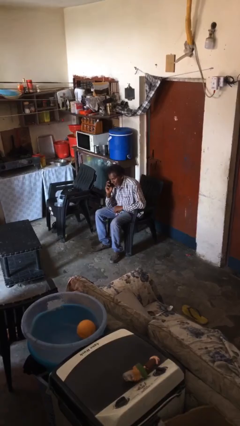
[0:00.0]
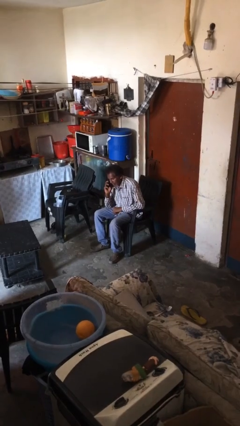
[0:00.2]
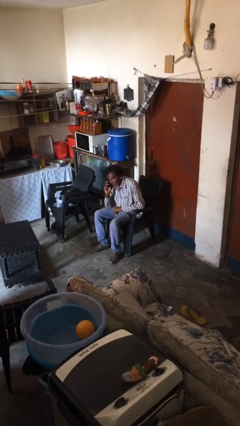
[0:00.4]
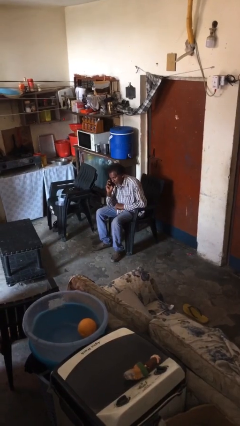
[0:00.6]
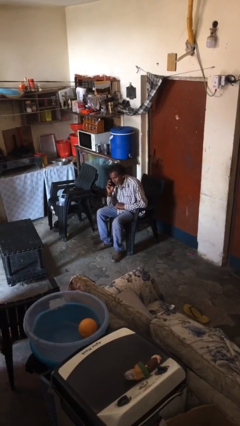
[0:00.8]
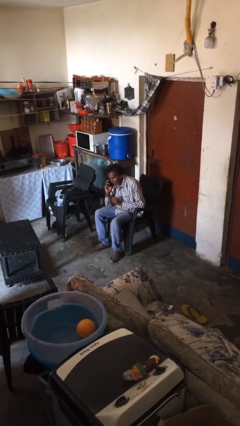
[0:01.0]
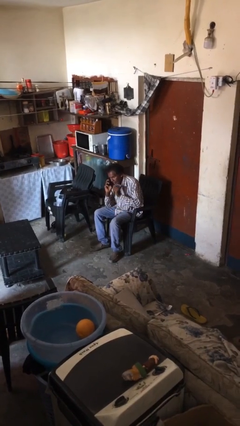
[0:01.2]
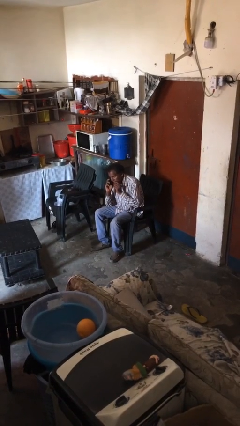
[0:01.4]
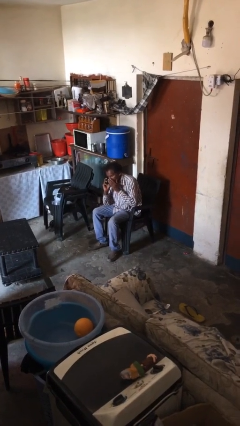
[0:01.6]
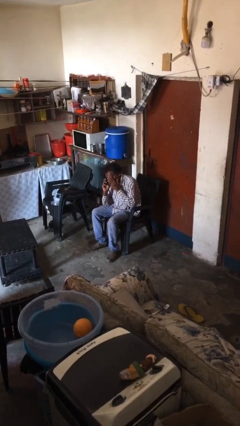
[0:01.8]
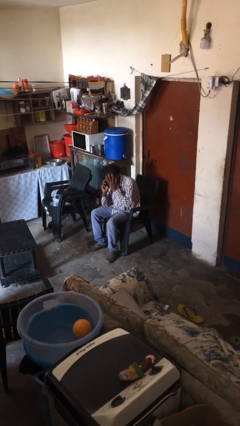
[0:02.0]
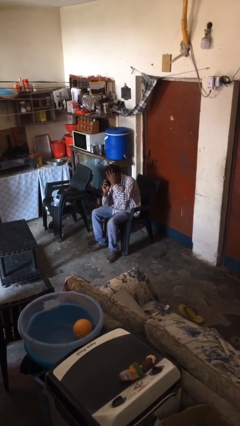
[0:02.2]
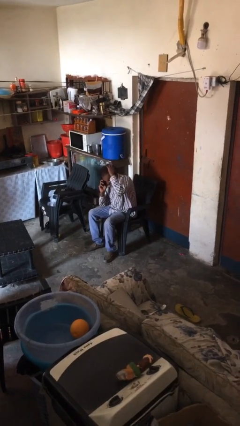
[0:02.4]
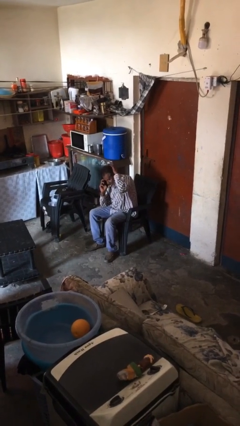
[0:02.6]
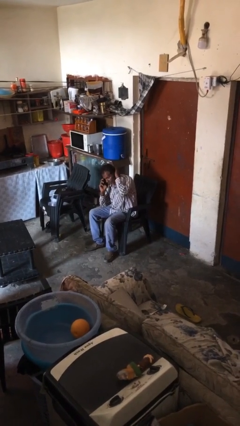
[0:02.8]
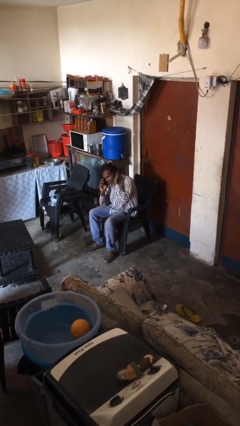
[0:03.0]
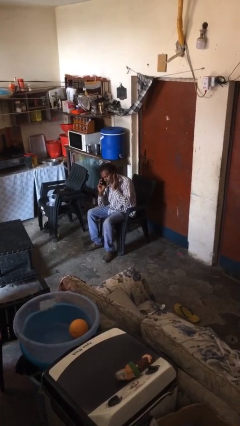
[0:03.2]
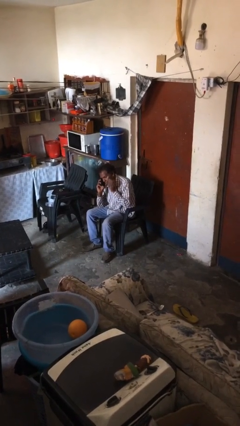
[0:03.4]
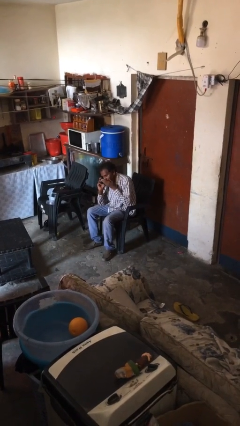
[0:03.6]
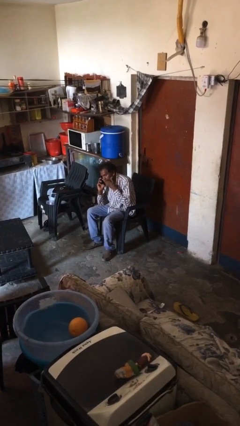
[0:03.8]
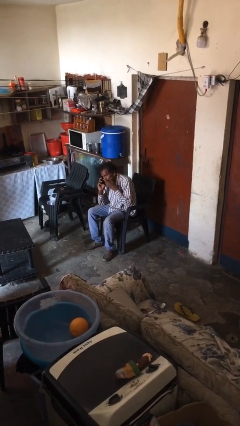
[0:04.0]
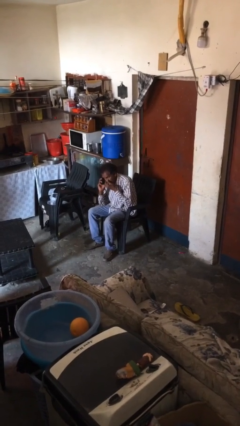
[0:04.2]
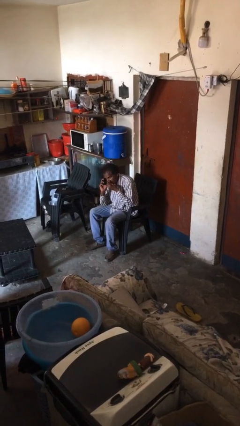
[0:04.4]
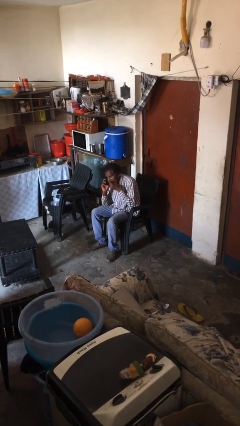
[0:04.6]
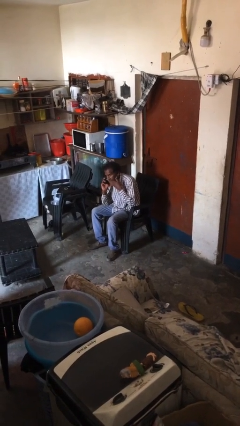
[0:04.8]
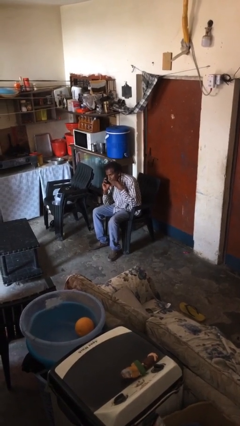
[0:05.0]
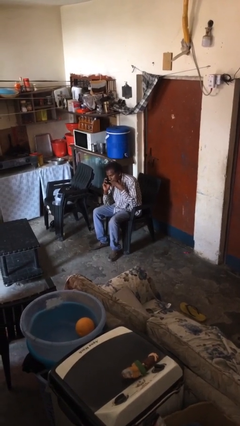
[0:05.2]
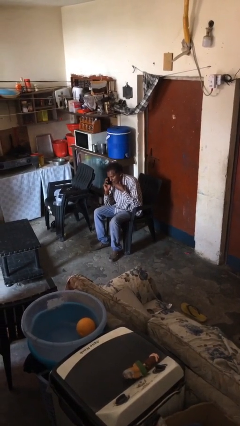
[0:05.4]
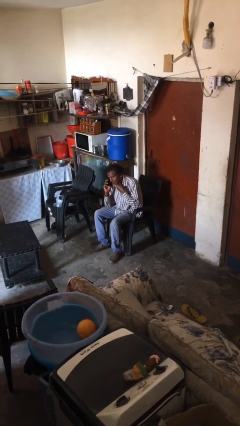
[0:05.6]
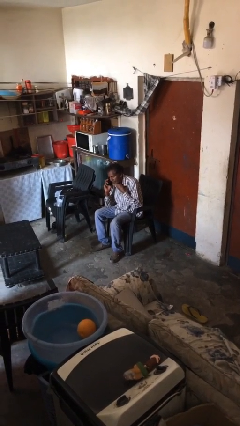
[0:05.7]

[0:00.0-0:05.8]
person talks on phone

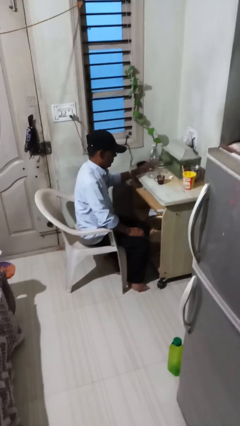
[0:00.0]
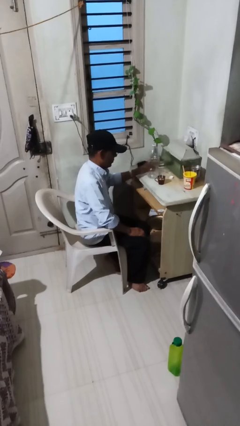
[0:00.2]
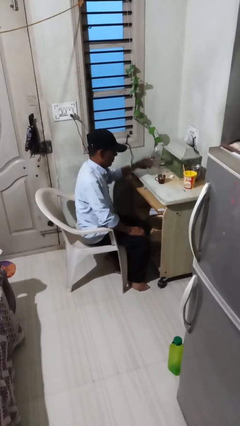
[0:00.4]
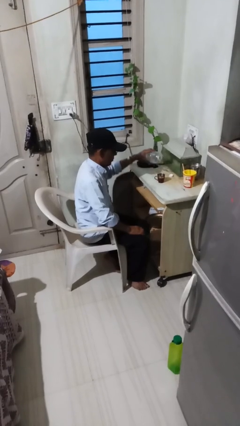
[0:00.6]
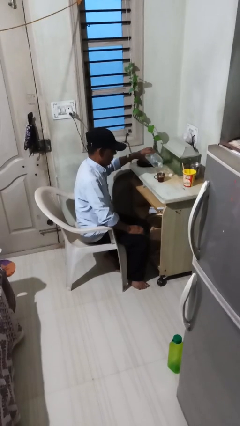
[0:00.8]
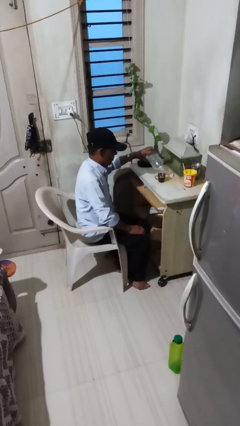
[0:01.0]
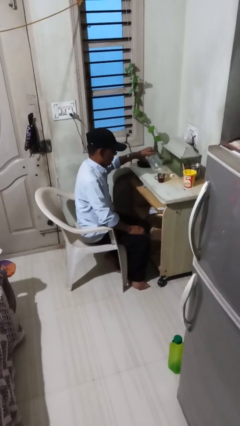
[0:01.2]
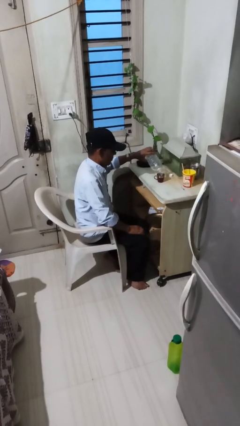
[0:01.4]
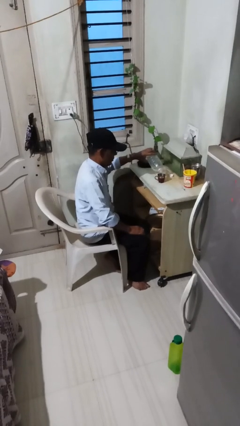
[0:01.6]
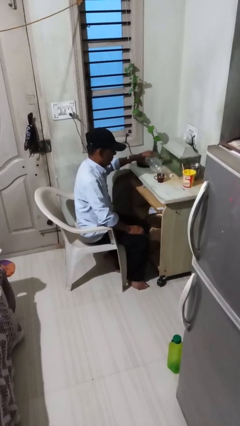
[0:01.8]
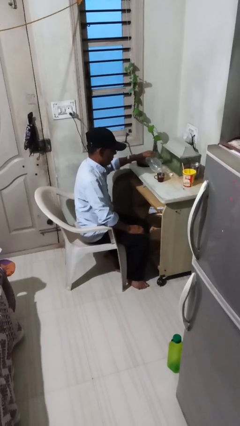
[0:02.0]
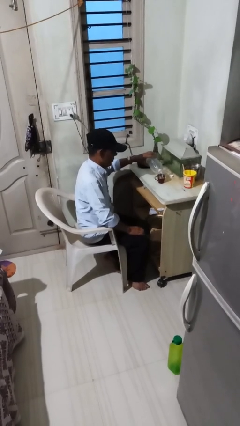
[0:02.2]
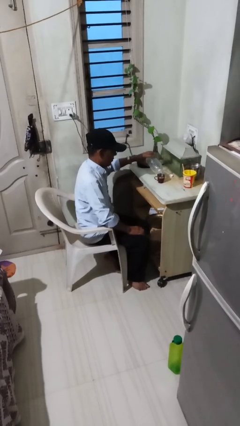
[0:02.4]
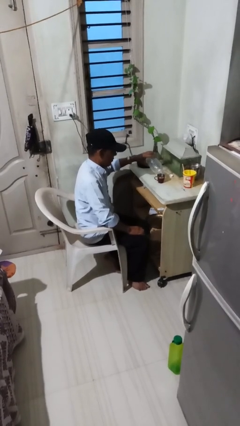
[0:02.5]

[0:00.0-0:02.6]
person pours liquid into cup

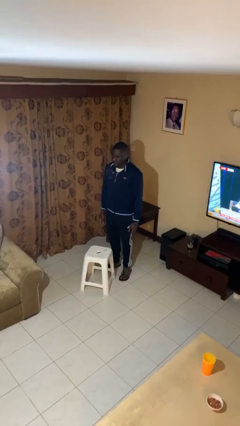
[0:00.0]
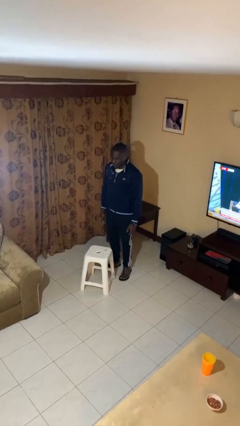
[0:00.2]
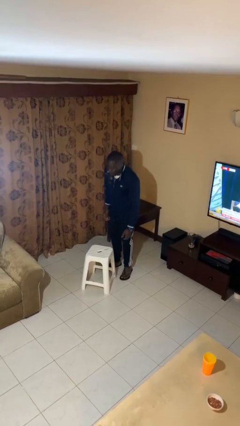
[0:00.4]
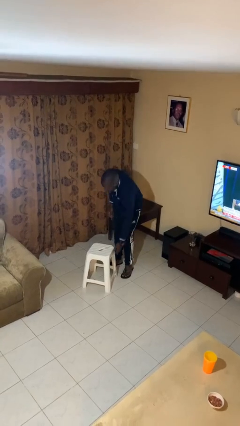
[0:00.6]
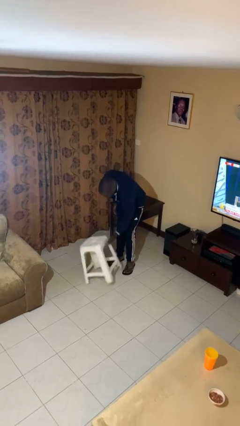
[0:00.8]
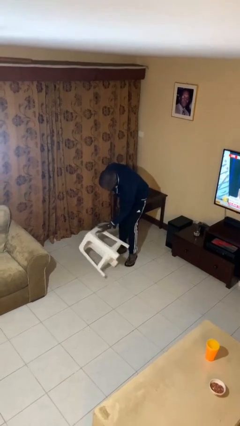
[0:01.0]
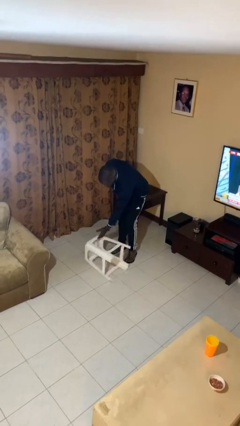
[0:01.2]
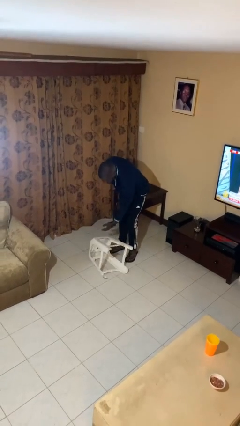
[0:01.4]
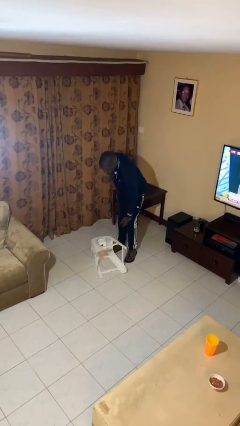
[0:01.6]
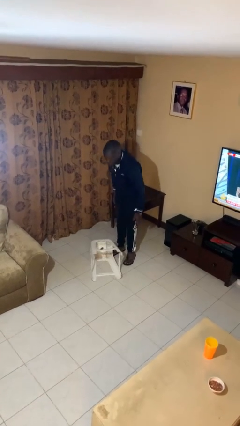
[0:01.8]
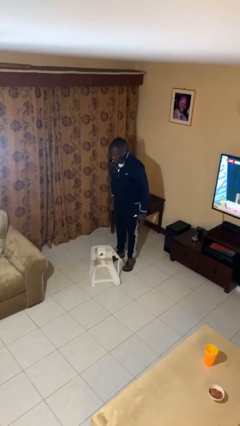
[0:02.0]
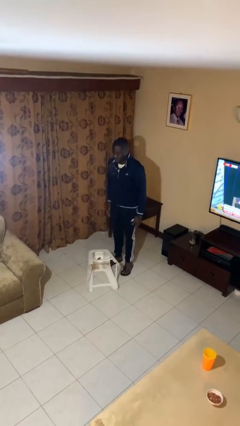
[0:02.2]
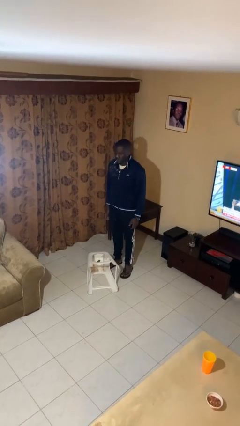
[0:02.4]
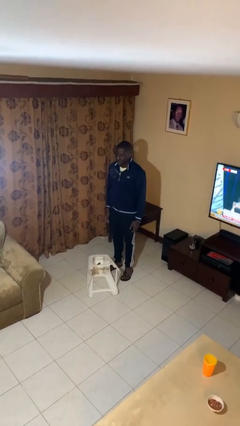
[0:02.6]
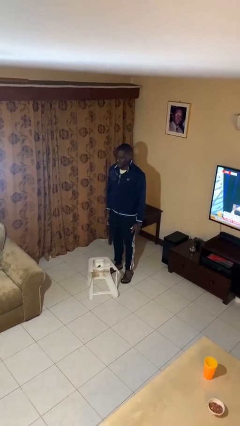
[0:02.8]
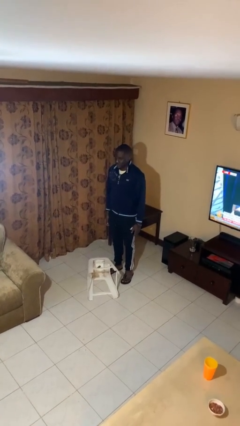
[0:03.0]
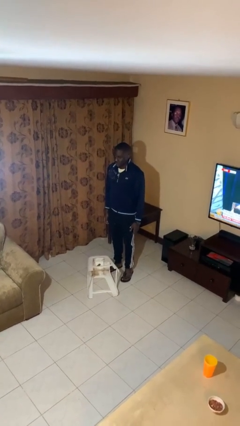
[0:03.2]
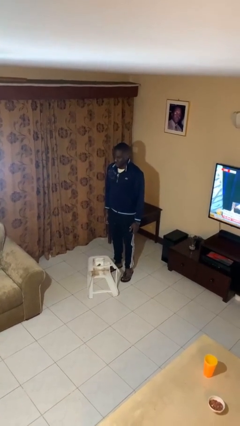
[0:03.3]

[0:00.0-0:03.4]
person knocks over furniture

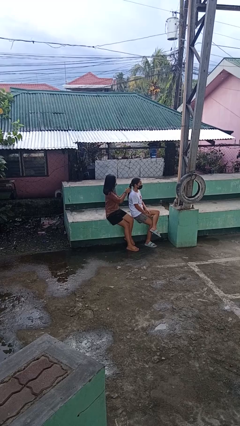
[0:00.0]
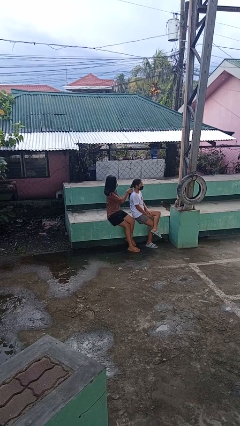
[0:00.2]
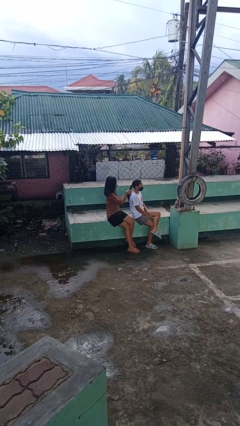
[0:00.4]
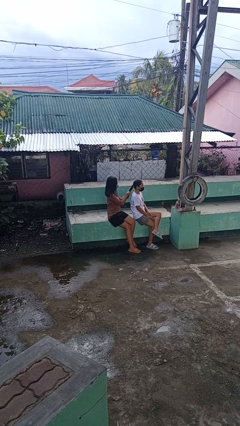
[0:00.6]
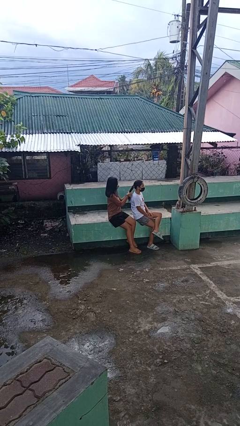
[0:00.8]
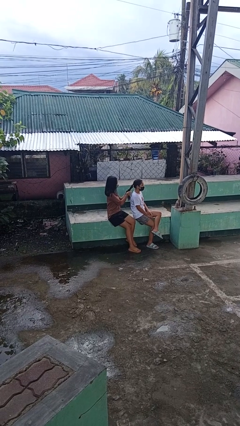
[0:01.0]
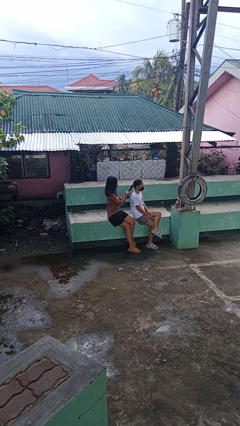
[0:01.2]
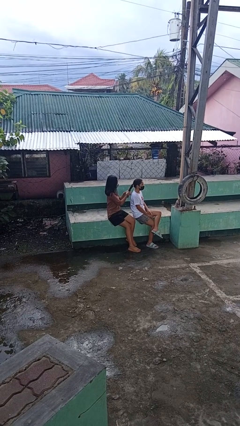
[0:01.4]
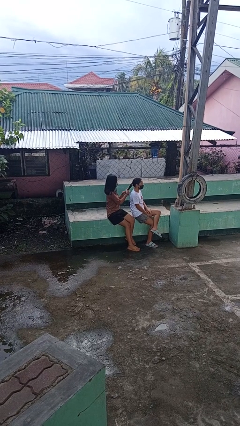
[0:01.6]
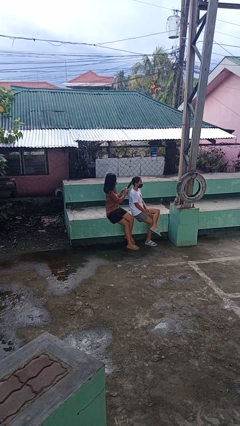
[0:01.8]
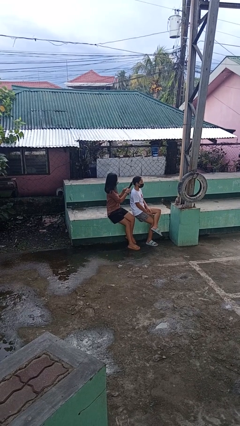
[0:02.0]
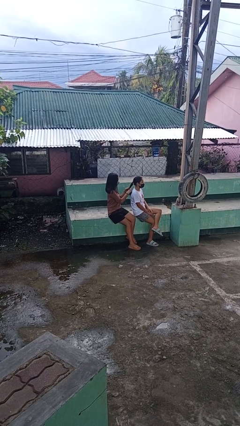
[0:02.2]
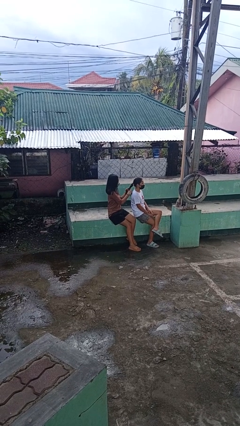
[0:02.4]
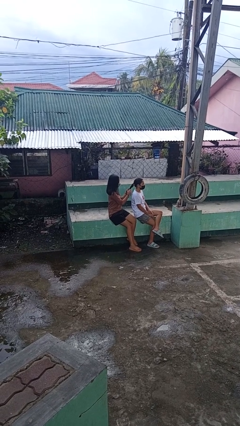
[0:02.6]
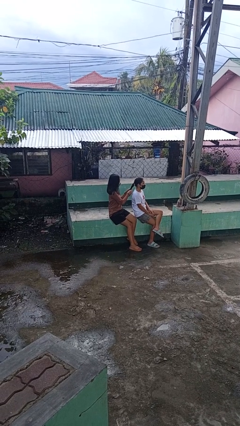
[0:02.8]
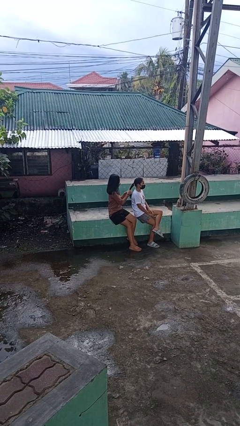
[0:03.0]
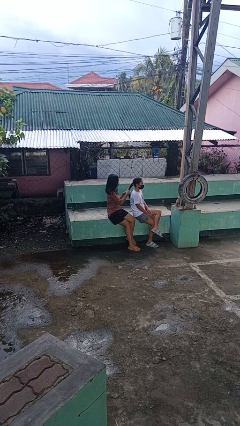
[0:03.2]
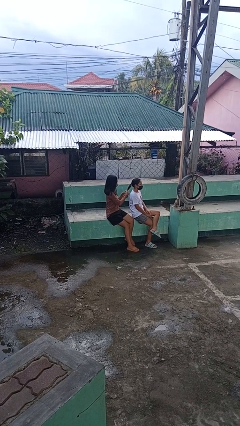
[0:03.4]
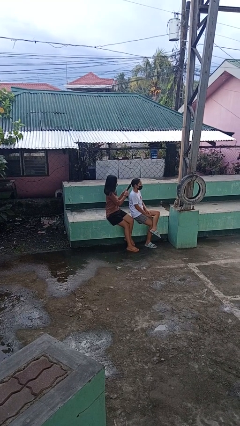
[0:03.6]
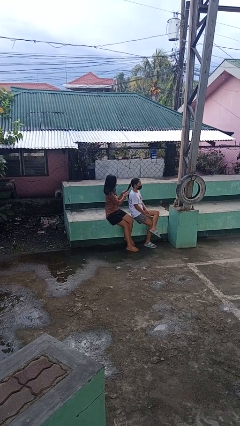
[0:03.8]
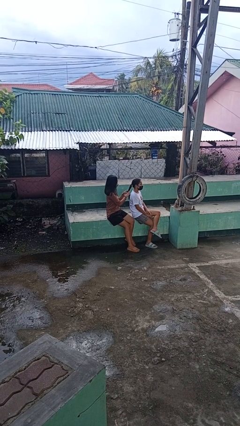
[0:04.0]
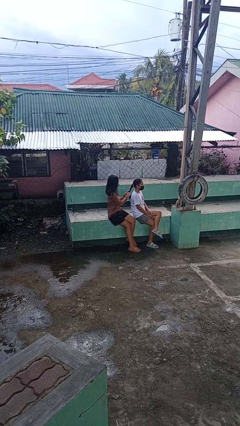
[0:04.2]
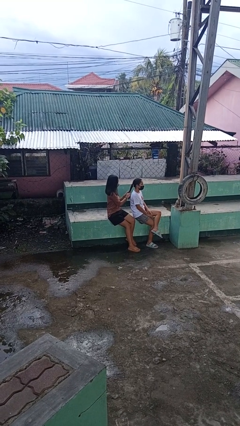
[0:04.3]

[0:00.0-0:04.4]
person braids hair of person

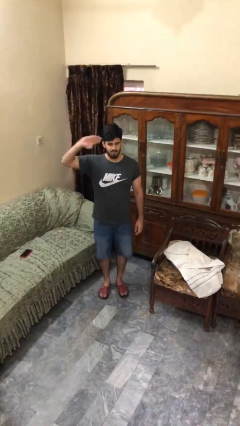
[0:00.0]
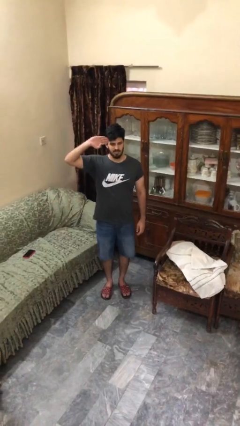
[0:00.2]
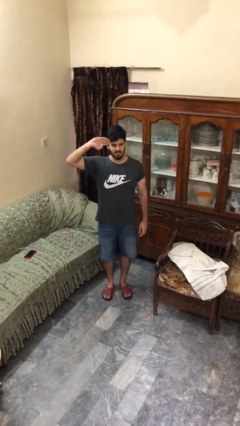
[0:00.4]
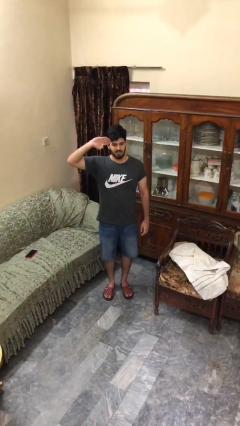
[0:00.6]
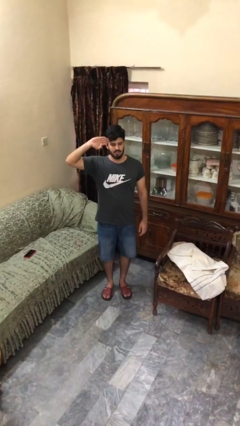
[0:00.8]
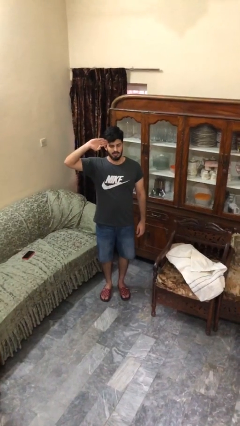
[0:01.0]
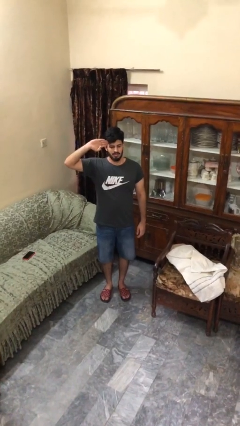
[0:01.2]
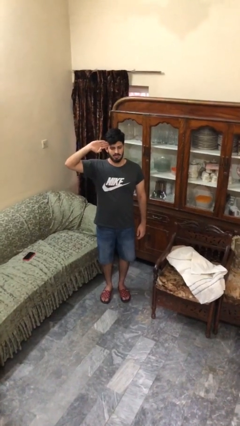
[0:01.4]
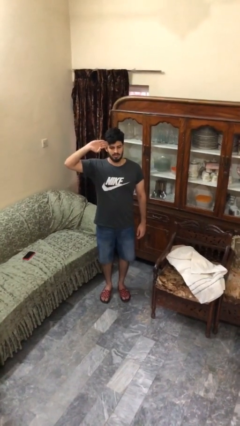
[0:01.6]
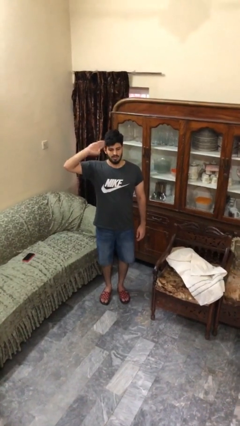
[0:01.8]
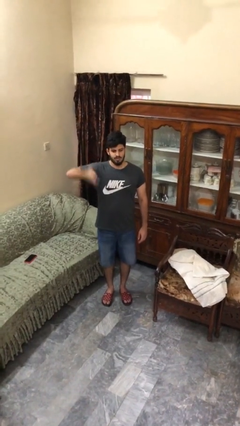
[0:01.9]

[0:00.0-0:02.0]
person salutes
